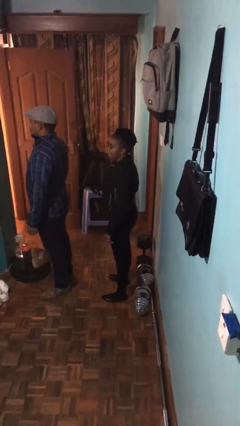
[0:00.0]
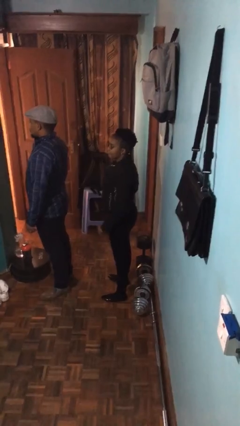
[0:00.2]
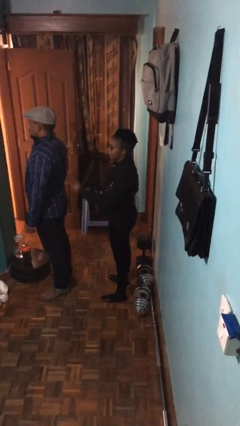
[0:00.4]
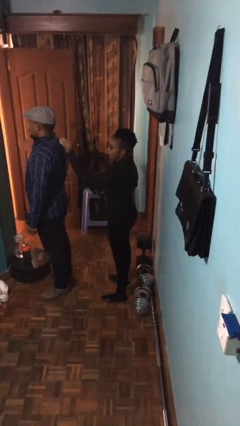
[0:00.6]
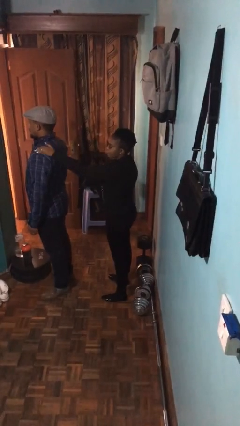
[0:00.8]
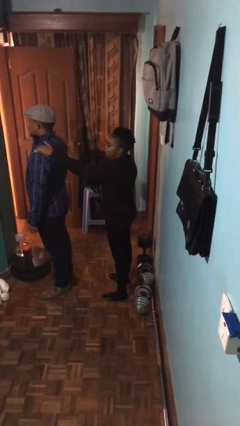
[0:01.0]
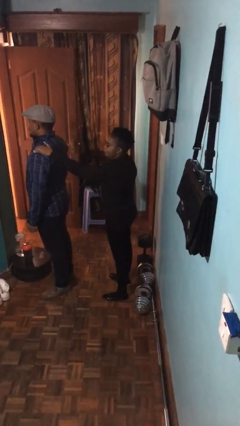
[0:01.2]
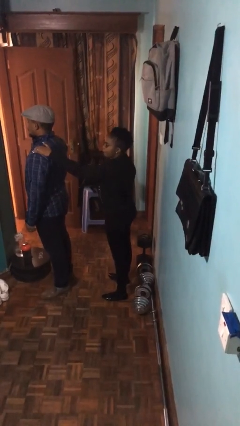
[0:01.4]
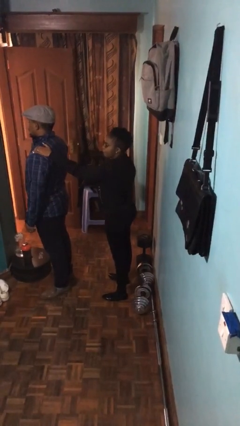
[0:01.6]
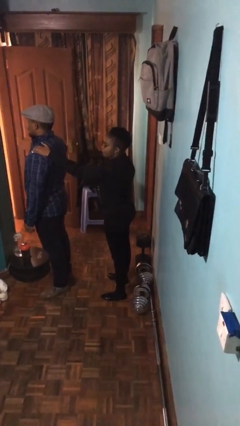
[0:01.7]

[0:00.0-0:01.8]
person grabs person by shoulder

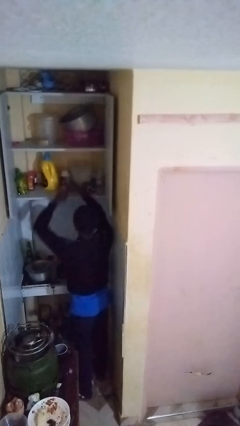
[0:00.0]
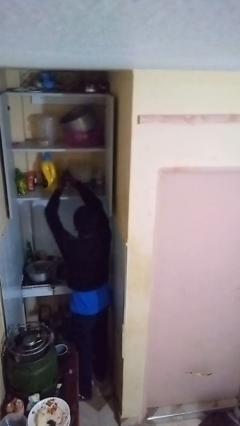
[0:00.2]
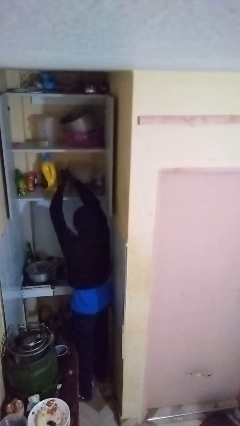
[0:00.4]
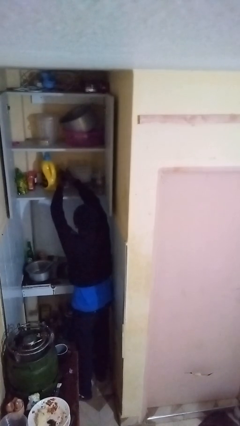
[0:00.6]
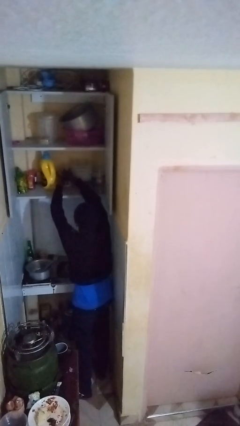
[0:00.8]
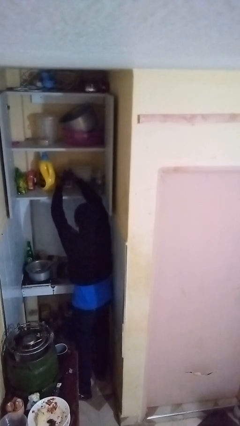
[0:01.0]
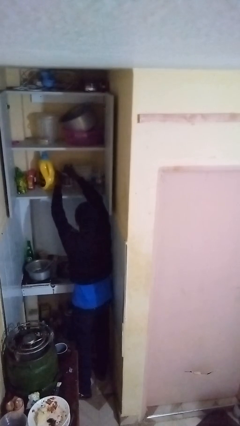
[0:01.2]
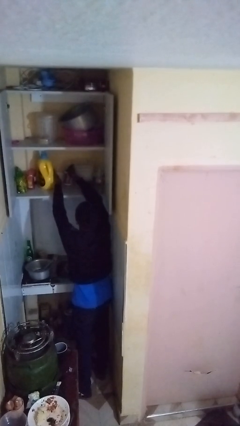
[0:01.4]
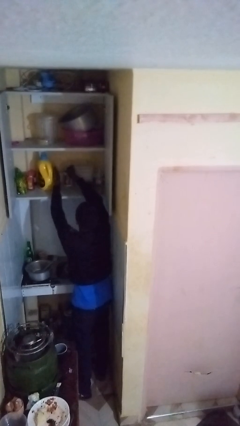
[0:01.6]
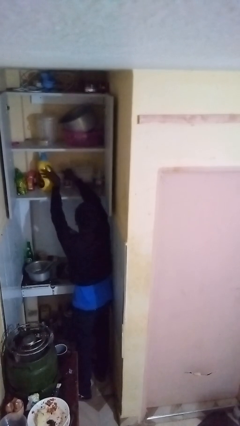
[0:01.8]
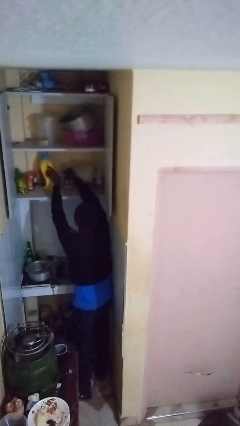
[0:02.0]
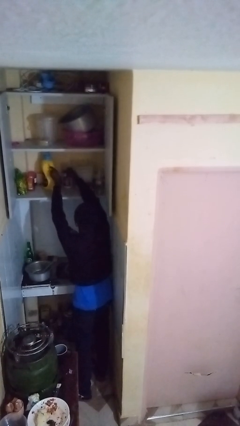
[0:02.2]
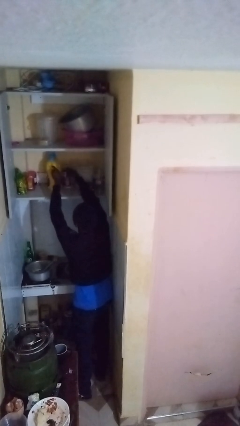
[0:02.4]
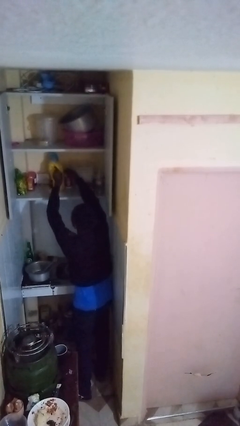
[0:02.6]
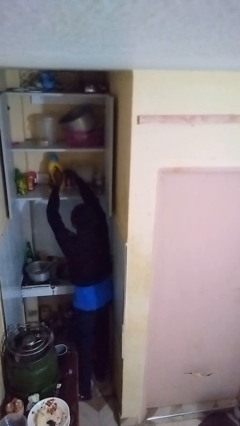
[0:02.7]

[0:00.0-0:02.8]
person searches in kitchen drawer

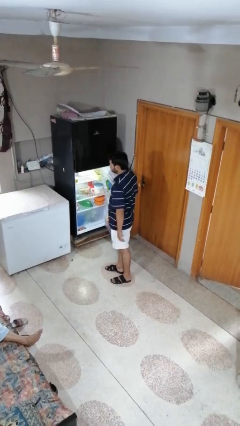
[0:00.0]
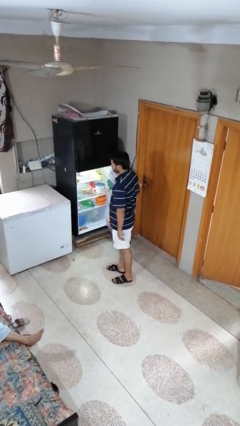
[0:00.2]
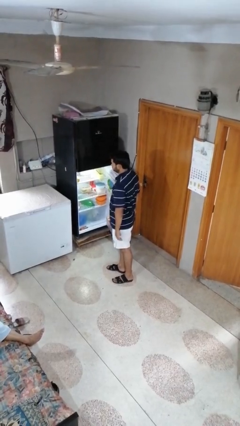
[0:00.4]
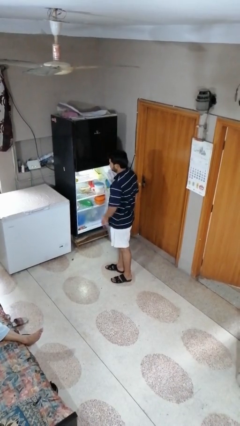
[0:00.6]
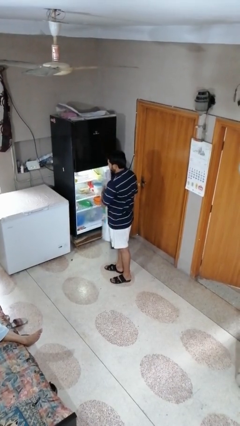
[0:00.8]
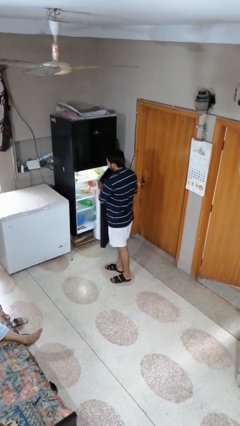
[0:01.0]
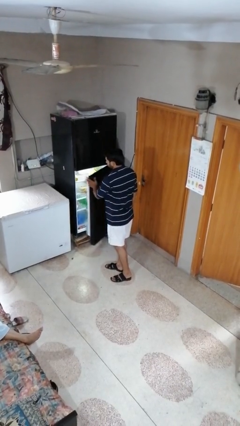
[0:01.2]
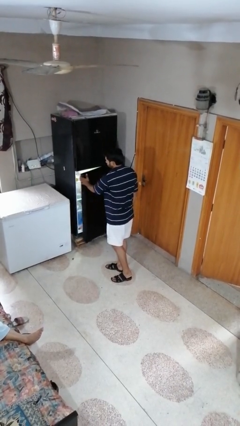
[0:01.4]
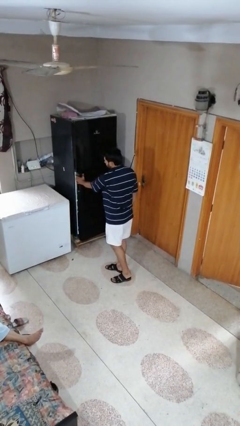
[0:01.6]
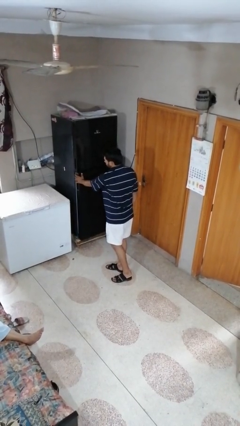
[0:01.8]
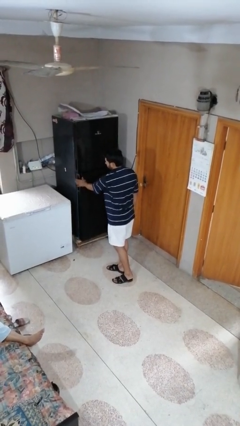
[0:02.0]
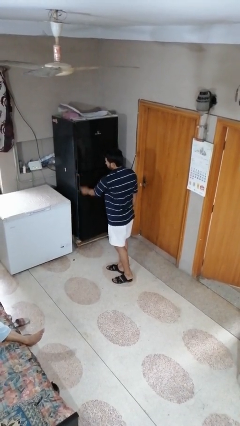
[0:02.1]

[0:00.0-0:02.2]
person closes refrigerator

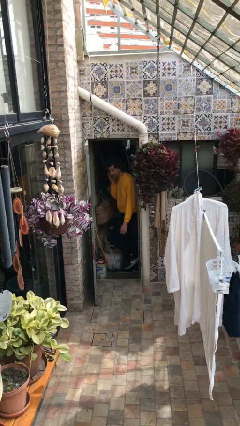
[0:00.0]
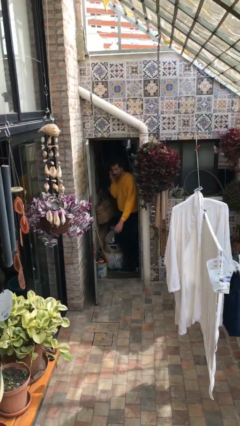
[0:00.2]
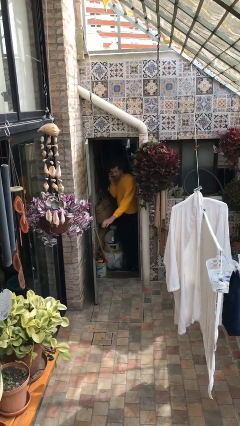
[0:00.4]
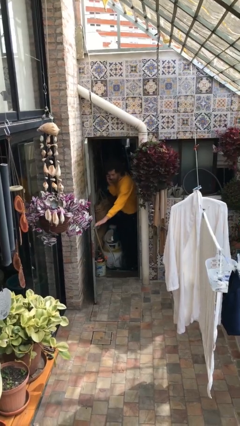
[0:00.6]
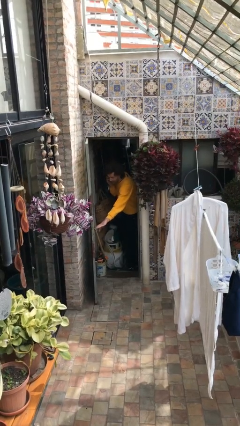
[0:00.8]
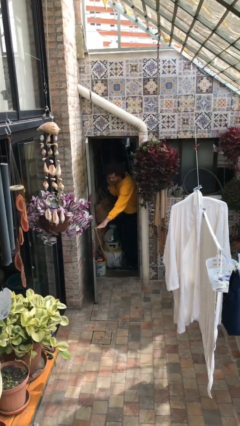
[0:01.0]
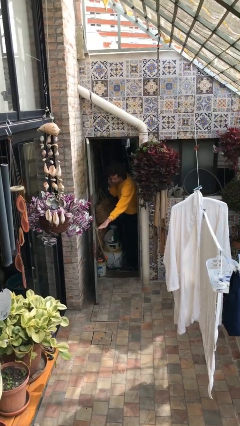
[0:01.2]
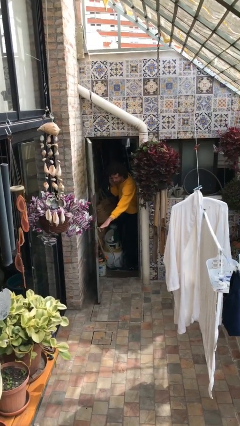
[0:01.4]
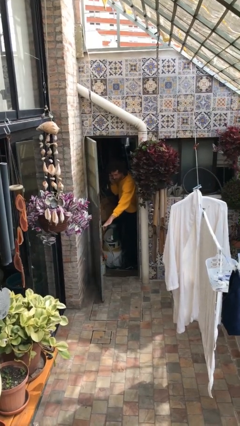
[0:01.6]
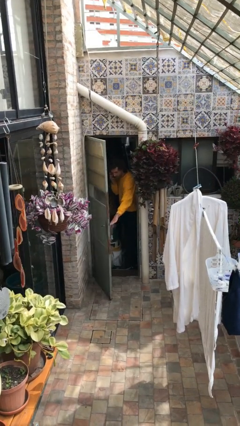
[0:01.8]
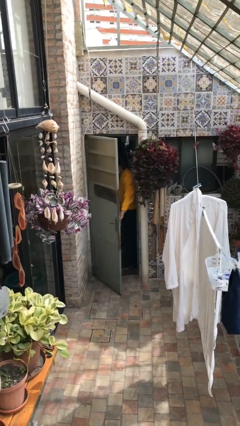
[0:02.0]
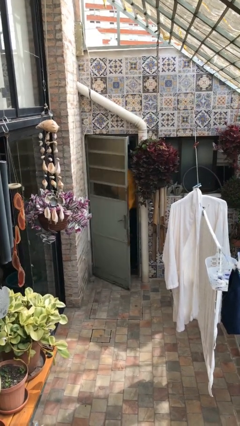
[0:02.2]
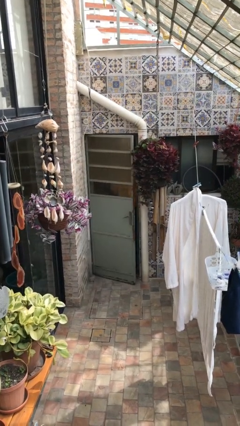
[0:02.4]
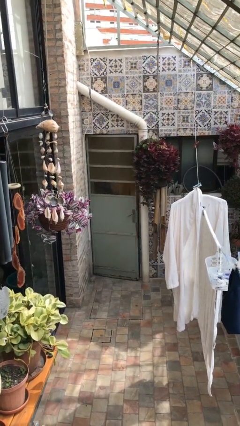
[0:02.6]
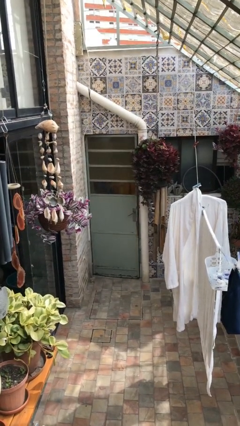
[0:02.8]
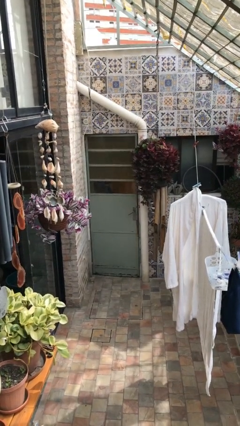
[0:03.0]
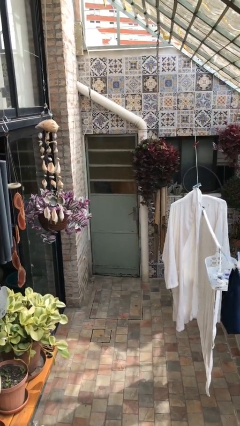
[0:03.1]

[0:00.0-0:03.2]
person closes facility door

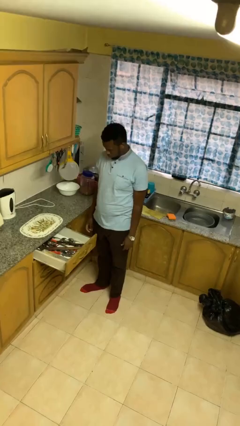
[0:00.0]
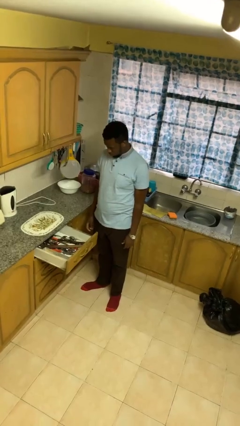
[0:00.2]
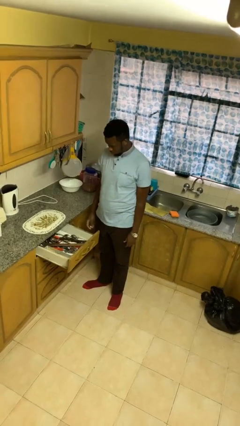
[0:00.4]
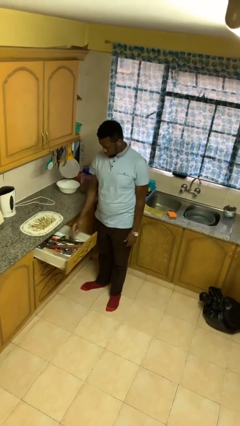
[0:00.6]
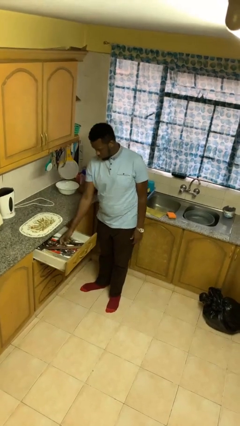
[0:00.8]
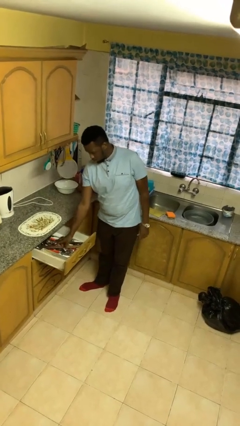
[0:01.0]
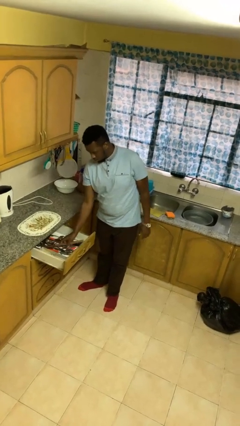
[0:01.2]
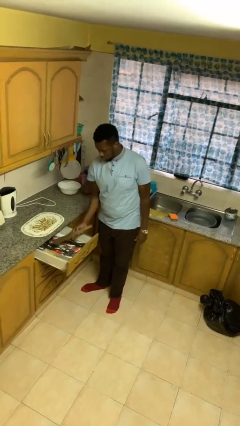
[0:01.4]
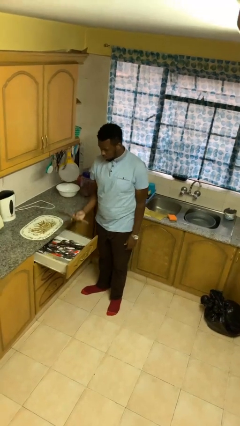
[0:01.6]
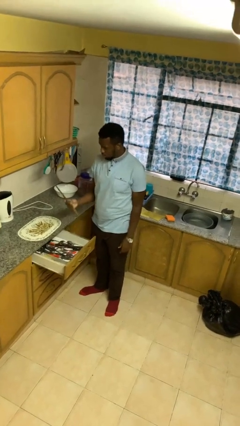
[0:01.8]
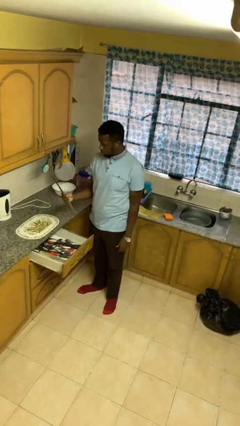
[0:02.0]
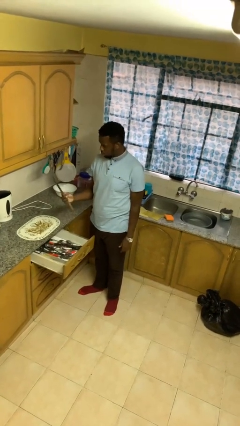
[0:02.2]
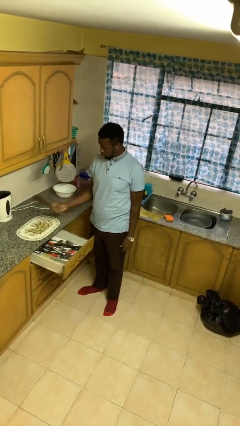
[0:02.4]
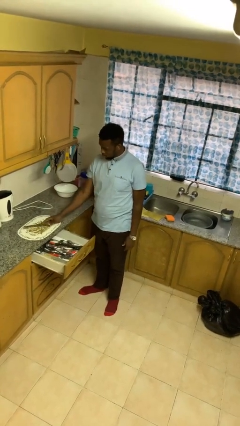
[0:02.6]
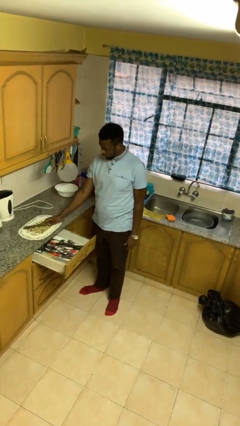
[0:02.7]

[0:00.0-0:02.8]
person takes object from kitchen drawer

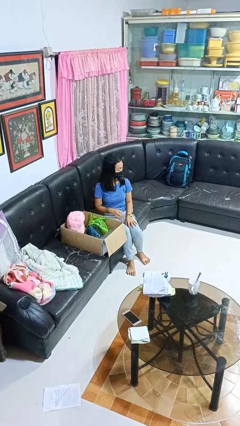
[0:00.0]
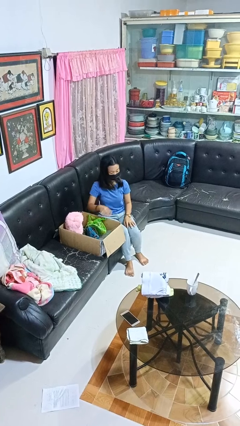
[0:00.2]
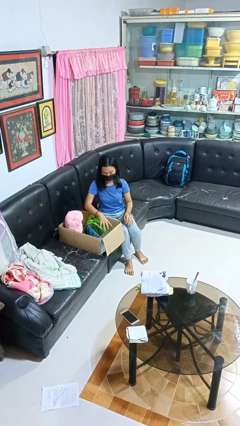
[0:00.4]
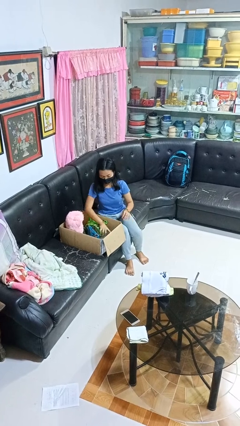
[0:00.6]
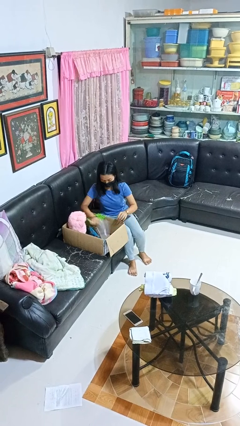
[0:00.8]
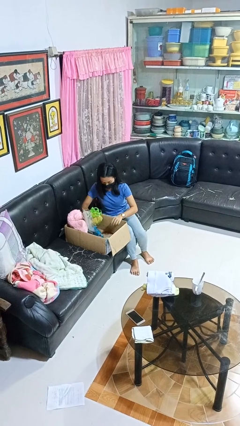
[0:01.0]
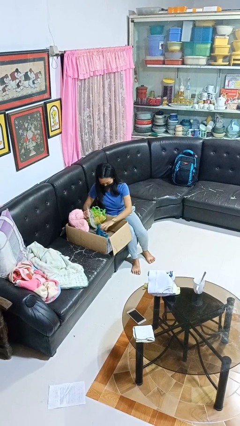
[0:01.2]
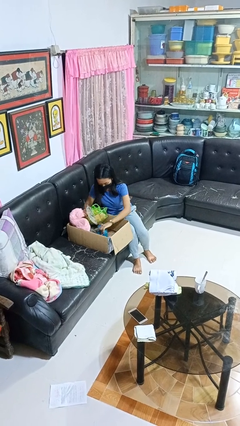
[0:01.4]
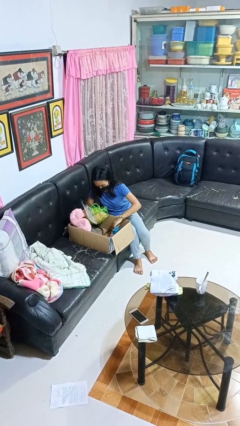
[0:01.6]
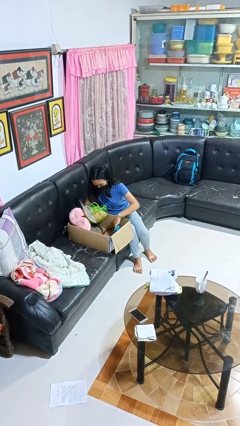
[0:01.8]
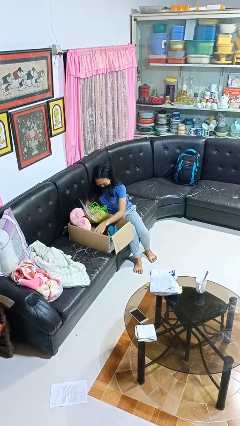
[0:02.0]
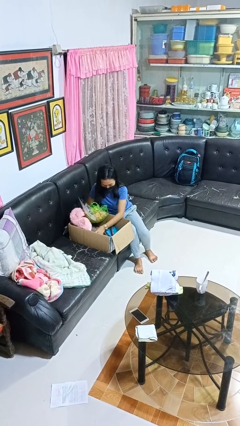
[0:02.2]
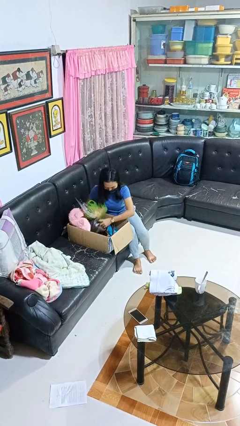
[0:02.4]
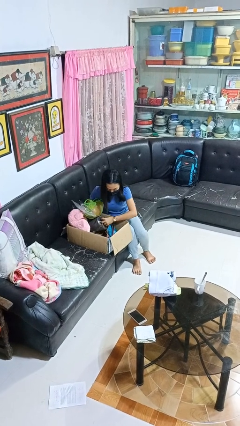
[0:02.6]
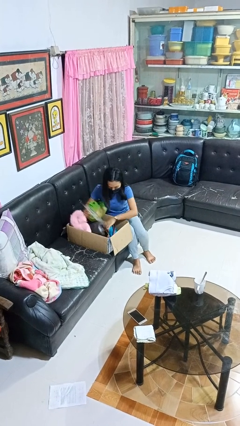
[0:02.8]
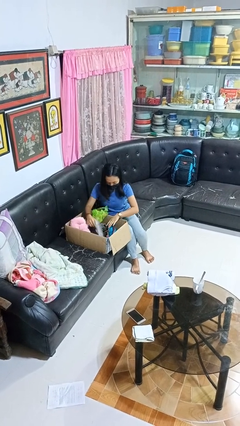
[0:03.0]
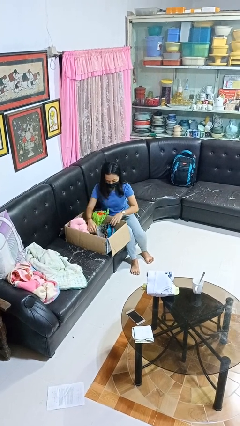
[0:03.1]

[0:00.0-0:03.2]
person searches in box

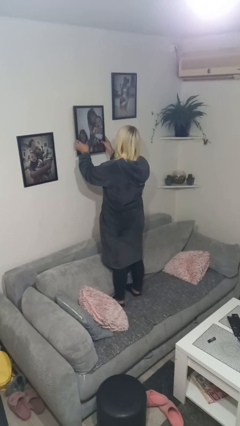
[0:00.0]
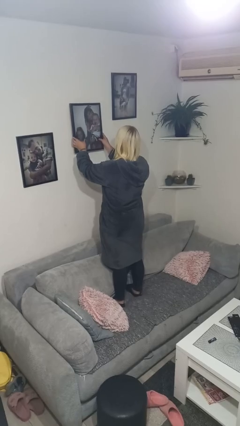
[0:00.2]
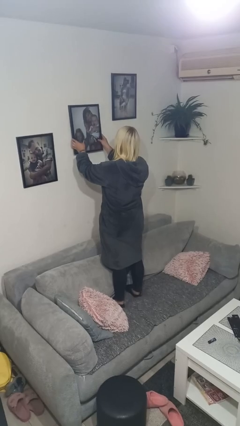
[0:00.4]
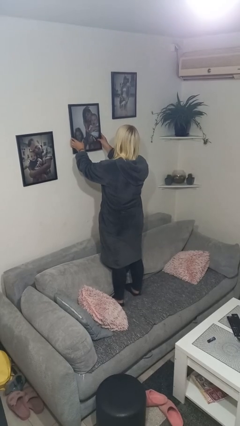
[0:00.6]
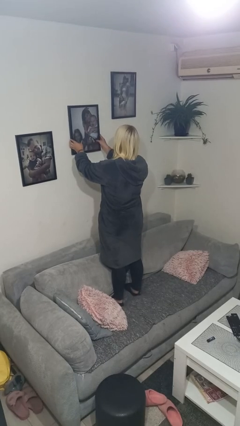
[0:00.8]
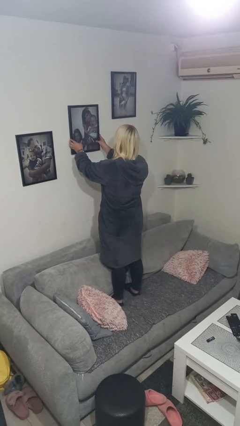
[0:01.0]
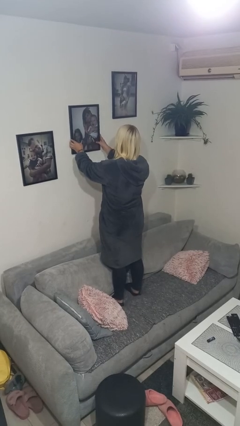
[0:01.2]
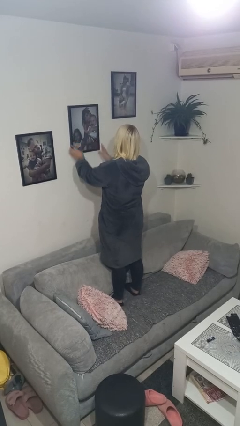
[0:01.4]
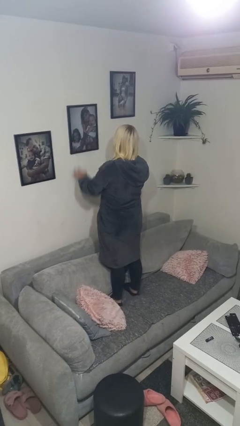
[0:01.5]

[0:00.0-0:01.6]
person puts up picture frame
